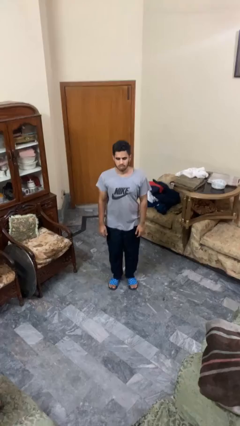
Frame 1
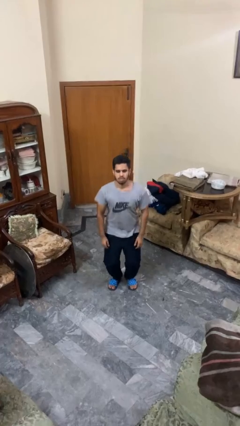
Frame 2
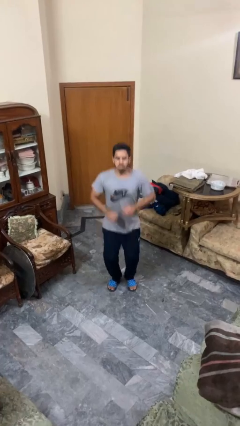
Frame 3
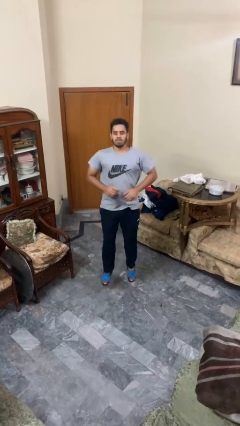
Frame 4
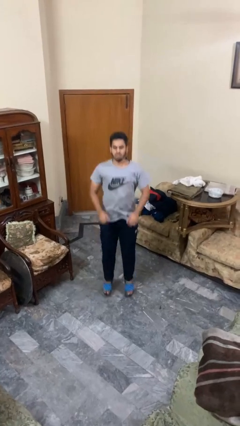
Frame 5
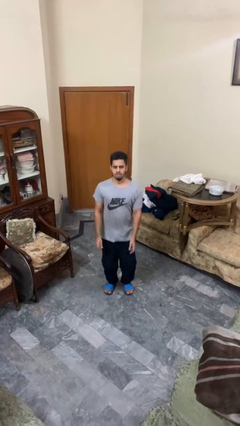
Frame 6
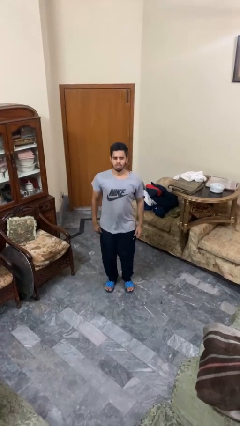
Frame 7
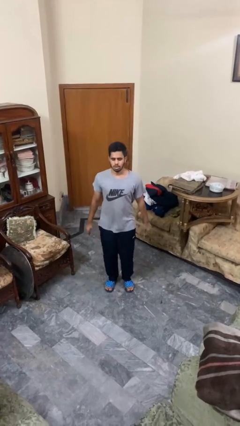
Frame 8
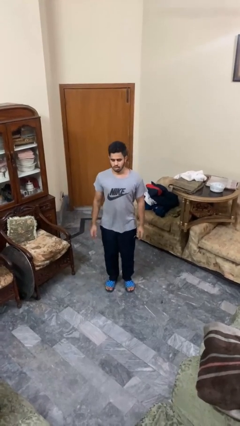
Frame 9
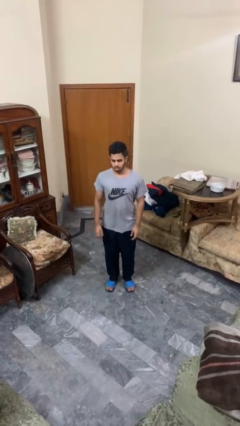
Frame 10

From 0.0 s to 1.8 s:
person jumps

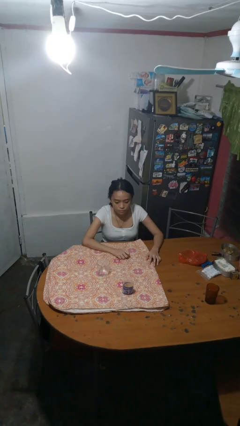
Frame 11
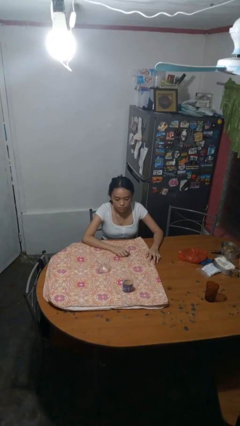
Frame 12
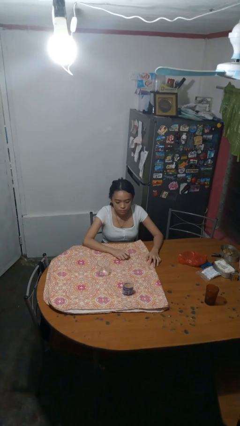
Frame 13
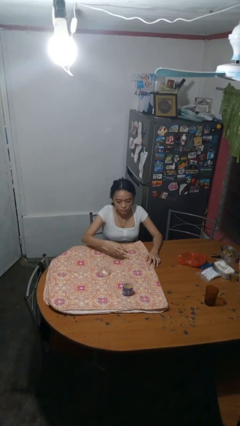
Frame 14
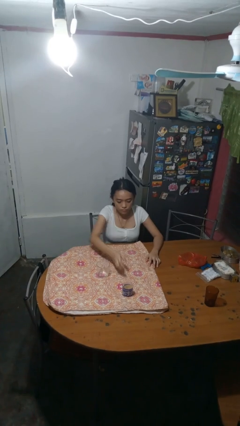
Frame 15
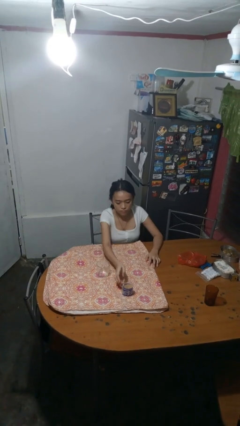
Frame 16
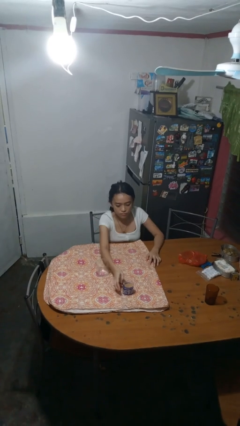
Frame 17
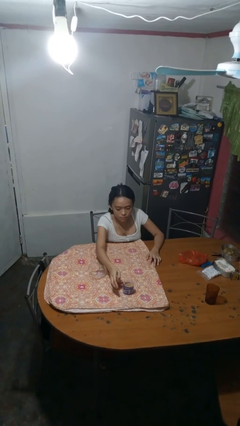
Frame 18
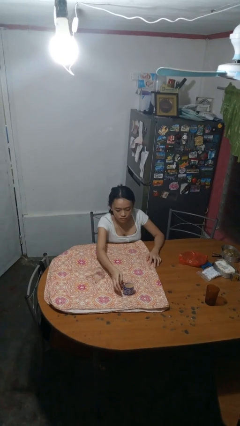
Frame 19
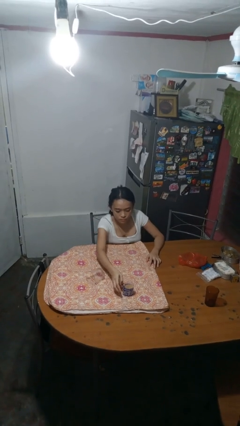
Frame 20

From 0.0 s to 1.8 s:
person knocks over glass

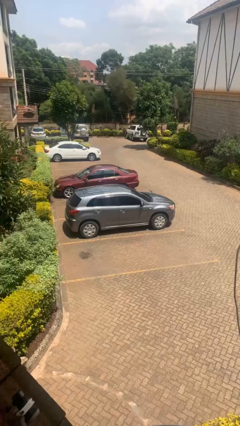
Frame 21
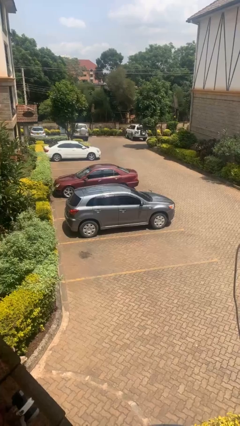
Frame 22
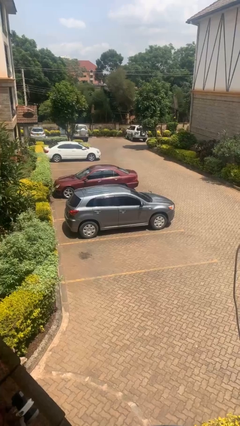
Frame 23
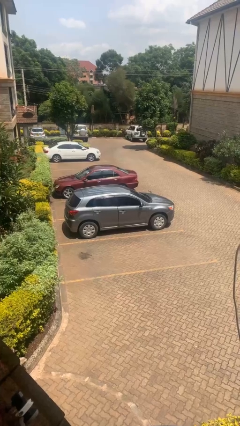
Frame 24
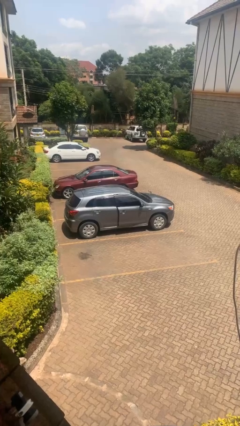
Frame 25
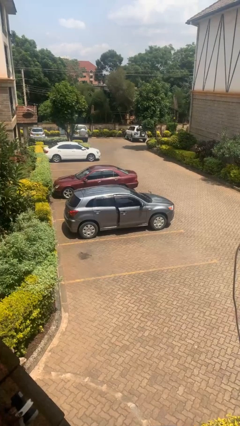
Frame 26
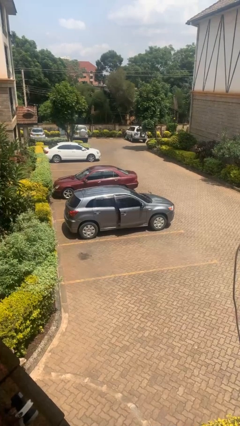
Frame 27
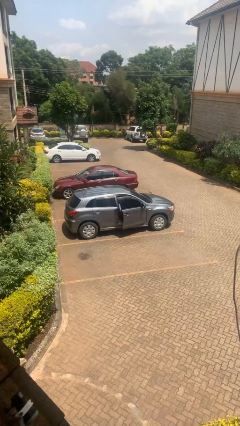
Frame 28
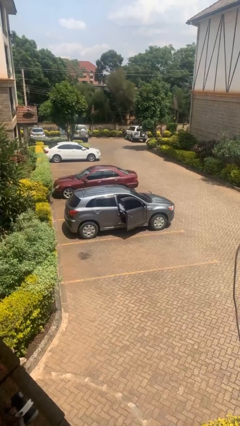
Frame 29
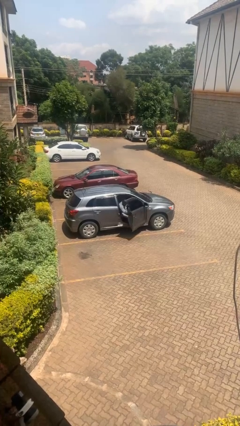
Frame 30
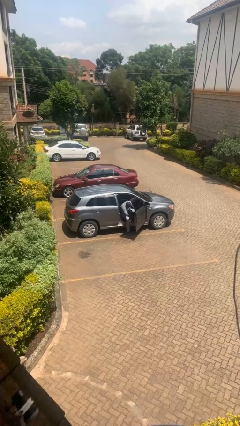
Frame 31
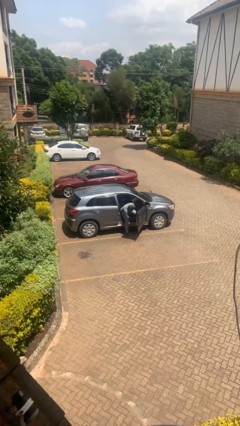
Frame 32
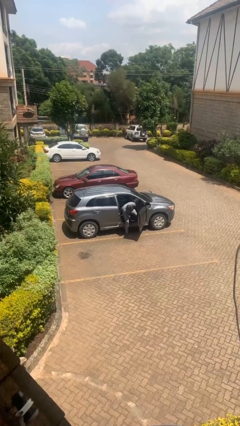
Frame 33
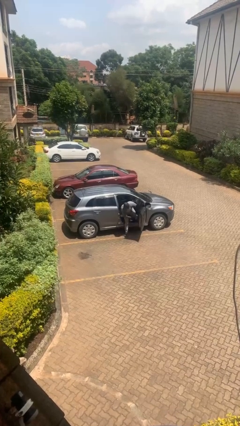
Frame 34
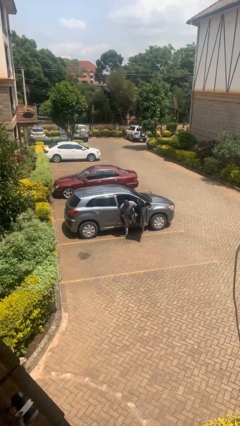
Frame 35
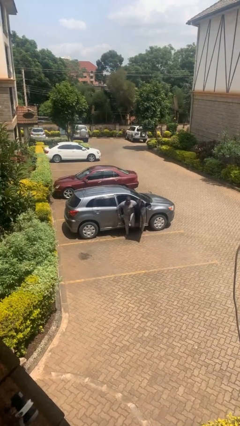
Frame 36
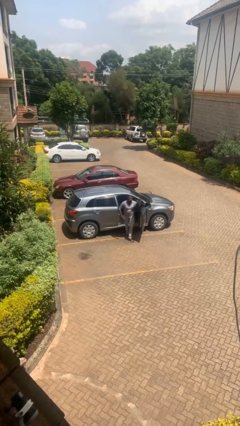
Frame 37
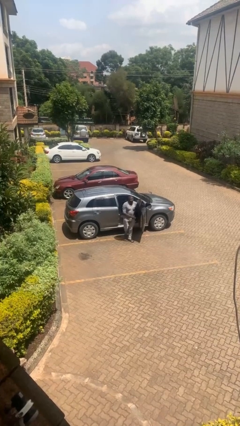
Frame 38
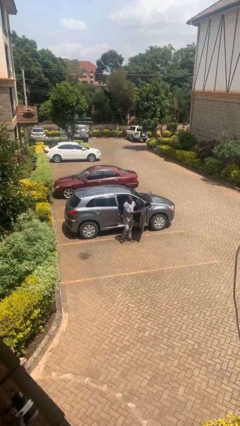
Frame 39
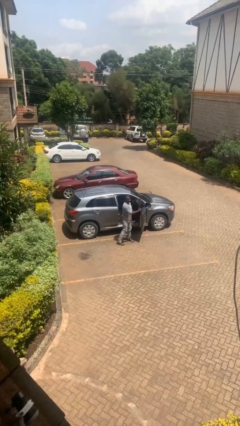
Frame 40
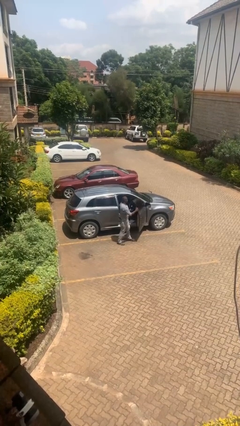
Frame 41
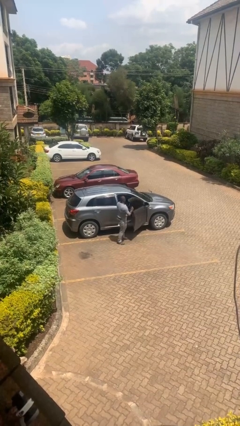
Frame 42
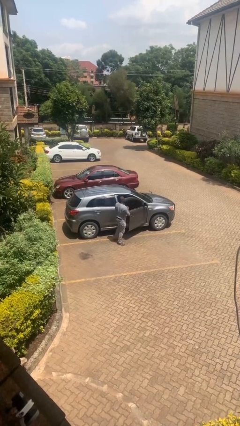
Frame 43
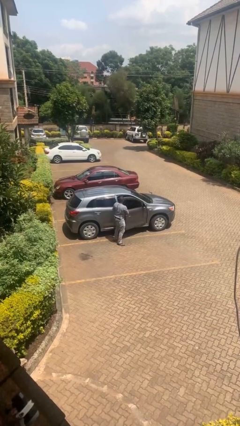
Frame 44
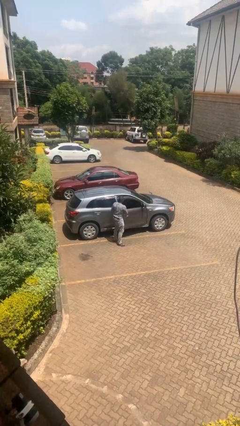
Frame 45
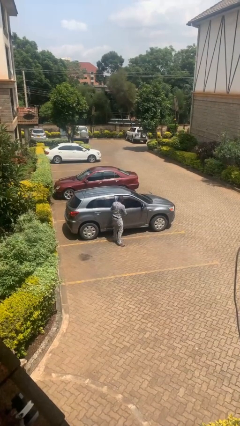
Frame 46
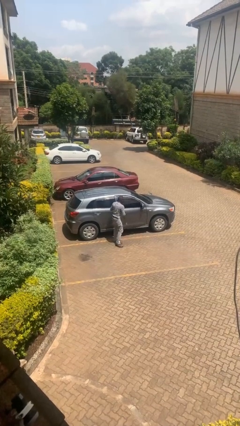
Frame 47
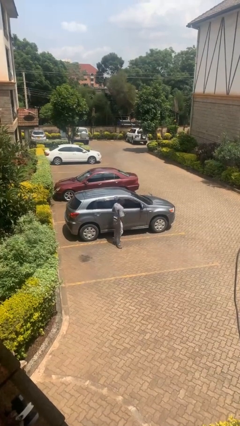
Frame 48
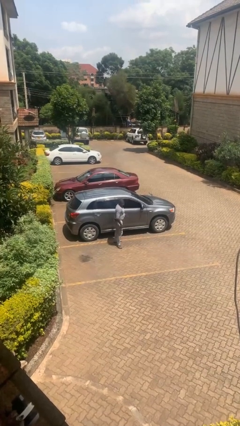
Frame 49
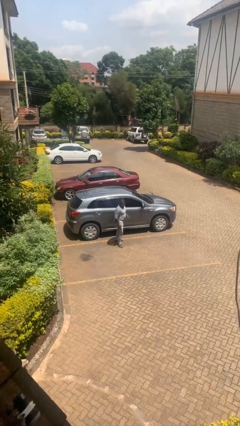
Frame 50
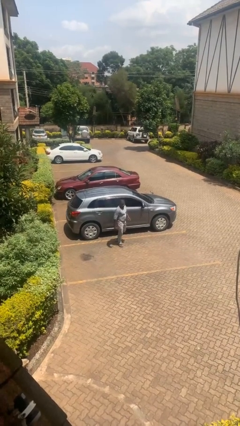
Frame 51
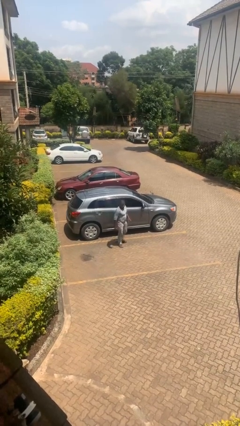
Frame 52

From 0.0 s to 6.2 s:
car drops off person

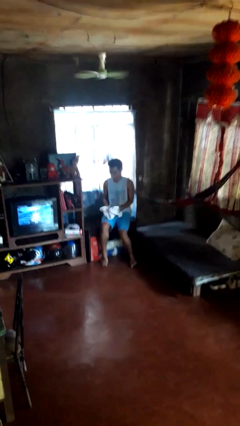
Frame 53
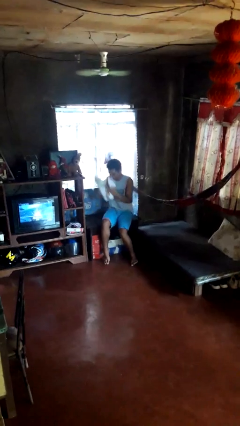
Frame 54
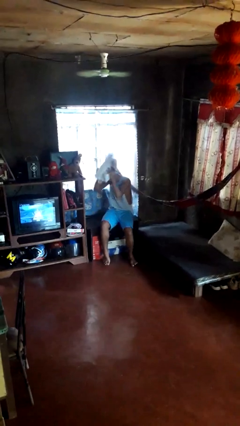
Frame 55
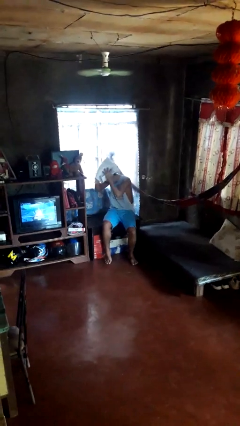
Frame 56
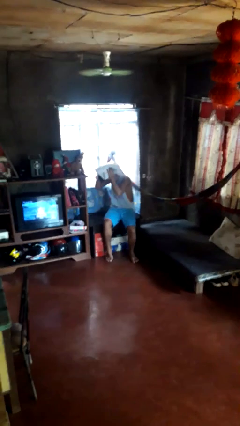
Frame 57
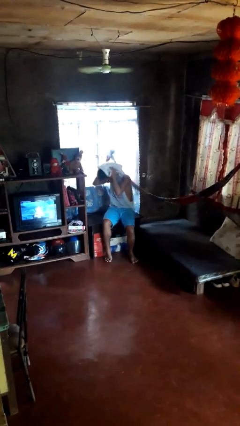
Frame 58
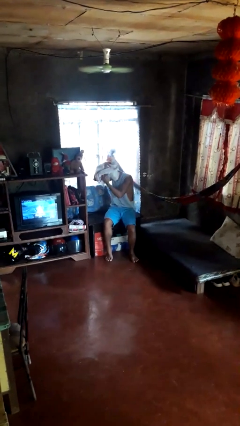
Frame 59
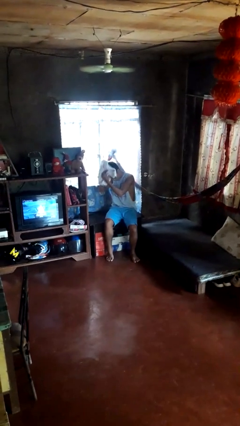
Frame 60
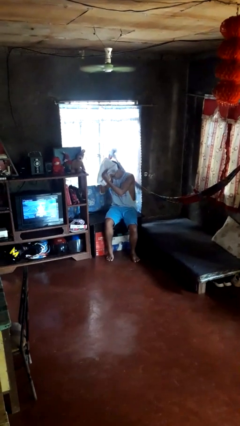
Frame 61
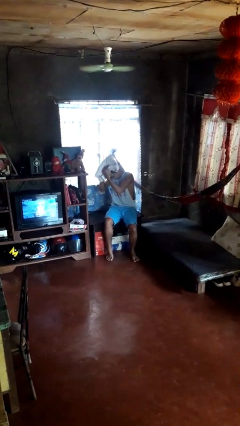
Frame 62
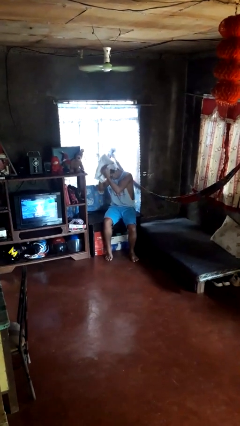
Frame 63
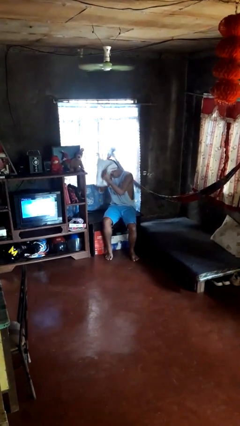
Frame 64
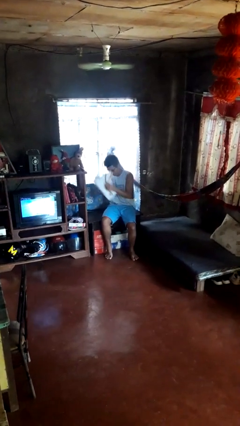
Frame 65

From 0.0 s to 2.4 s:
person dries hair with towel

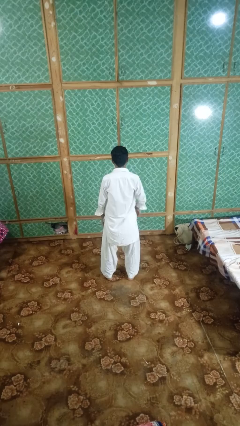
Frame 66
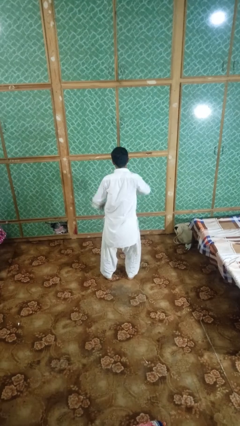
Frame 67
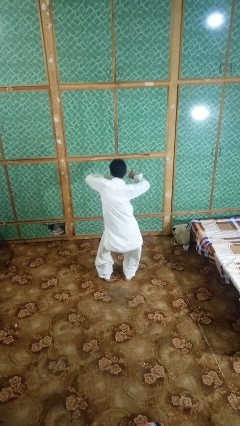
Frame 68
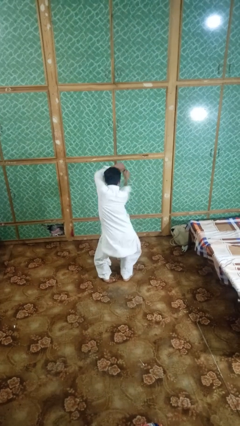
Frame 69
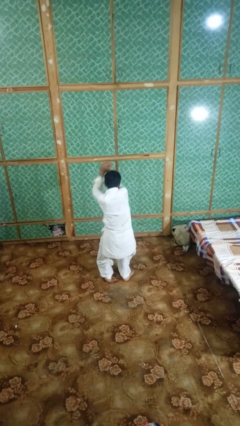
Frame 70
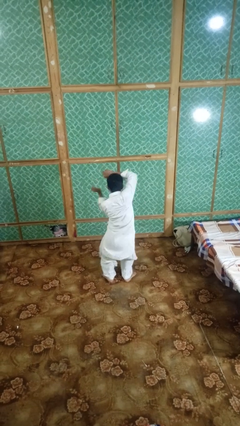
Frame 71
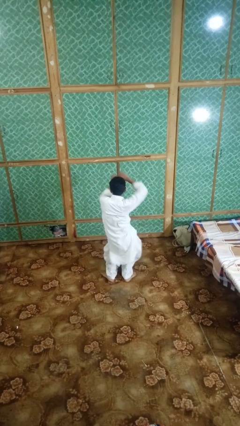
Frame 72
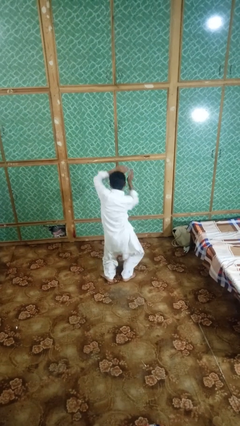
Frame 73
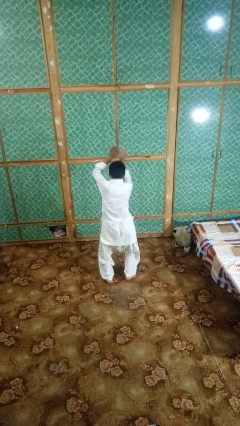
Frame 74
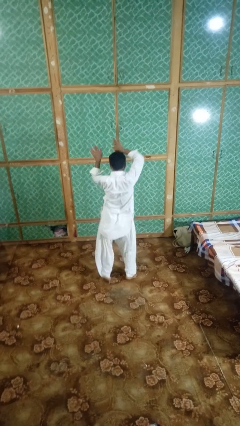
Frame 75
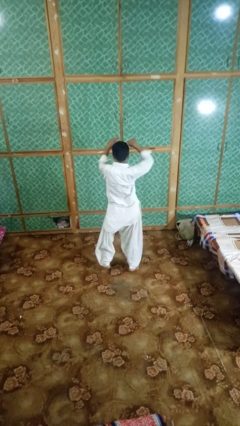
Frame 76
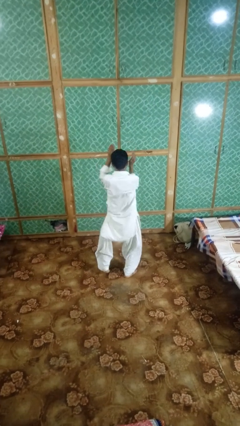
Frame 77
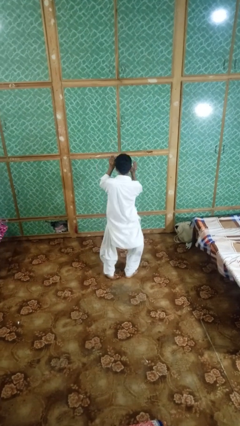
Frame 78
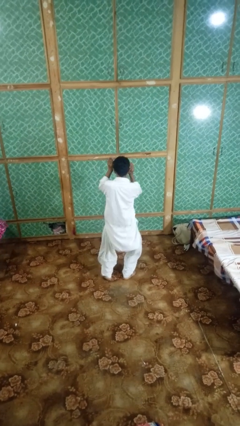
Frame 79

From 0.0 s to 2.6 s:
person dances in place

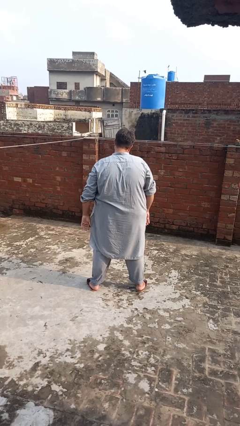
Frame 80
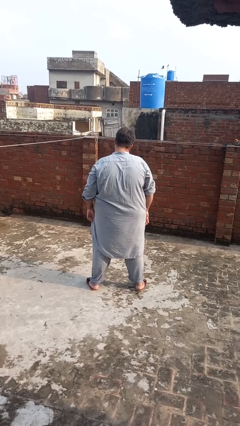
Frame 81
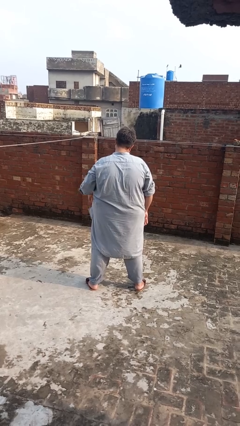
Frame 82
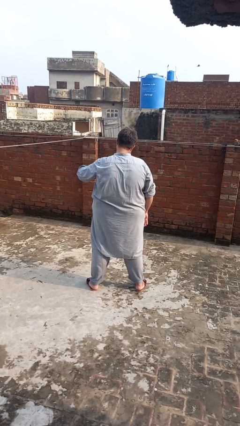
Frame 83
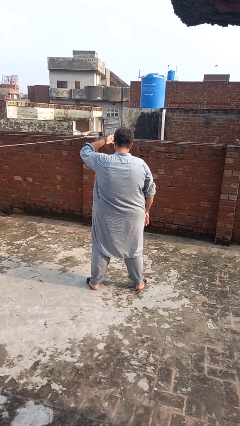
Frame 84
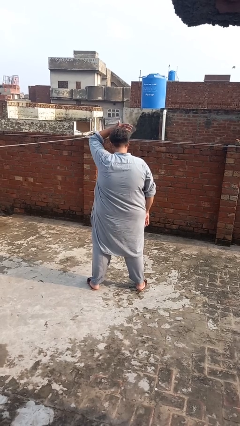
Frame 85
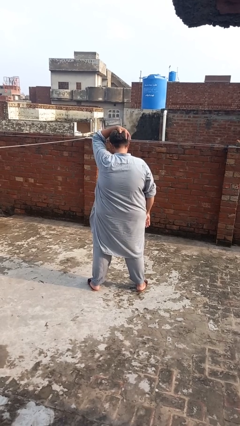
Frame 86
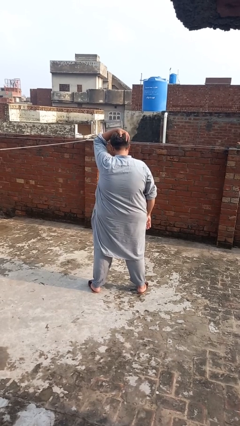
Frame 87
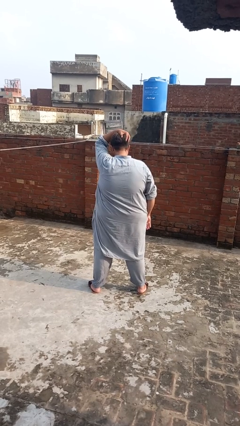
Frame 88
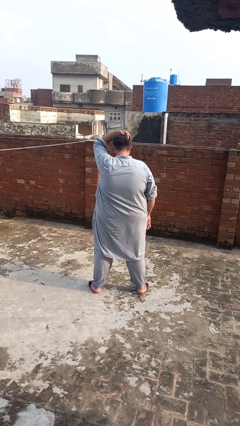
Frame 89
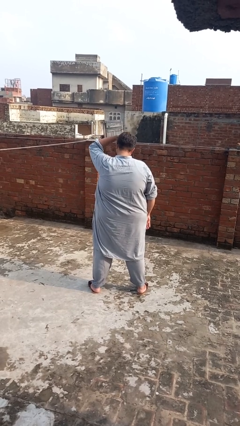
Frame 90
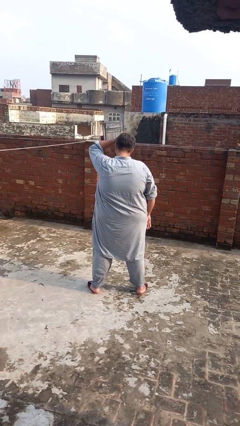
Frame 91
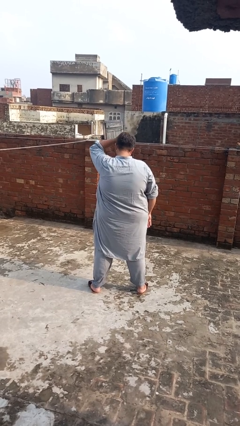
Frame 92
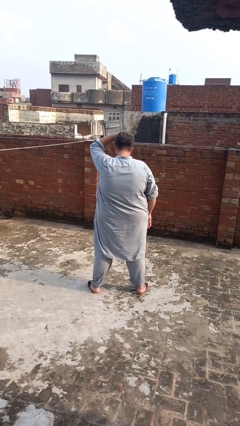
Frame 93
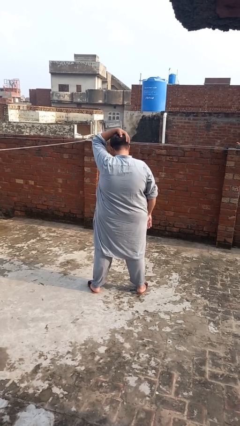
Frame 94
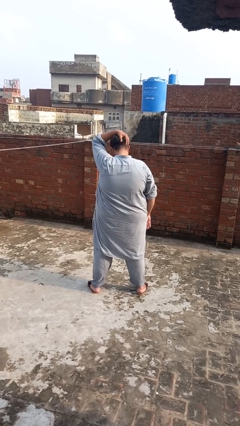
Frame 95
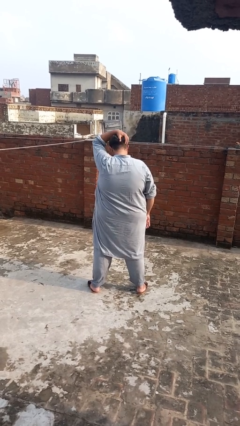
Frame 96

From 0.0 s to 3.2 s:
person pats head
